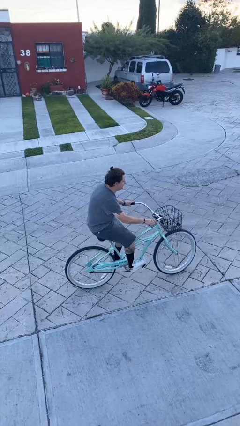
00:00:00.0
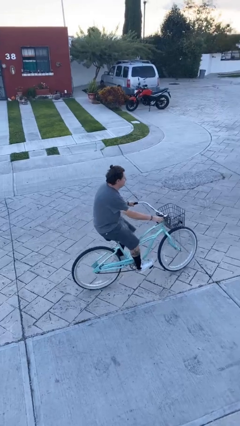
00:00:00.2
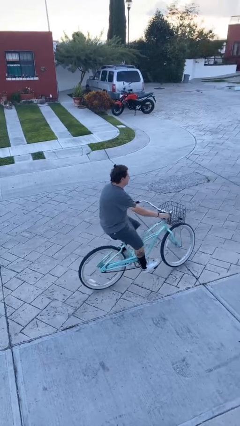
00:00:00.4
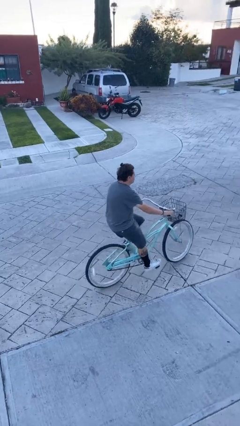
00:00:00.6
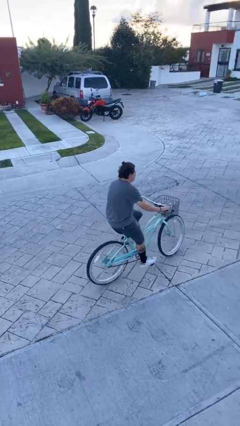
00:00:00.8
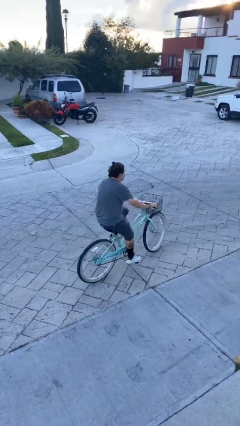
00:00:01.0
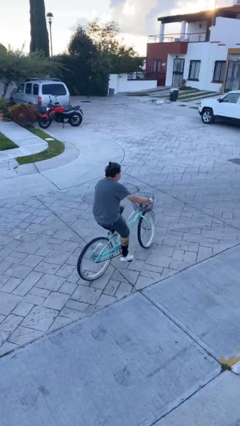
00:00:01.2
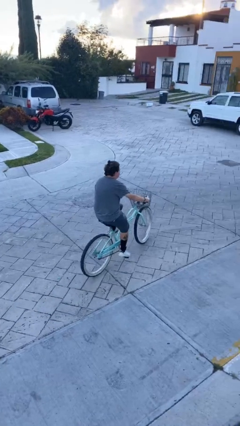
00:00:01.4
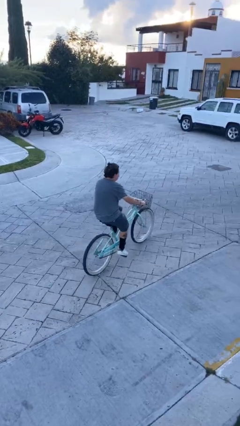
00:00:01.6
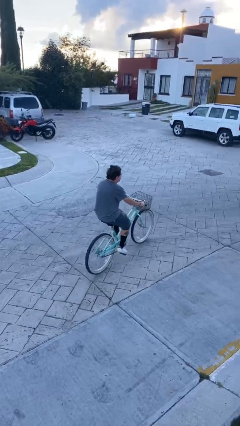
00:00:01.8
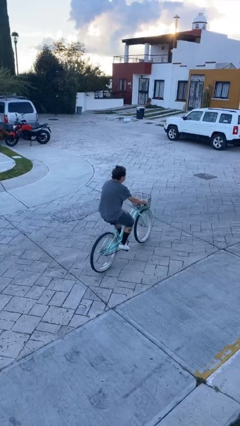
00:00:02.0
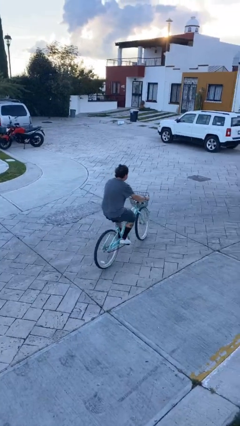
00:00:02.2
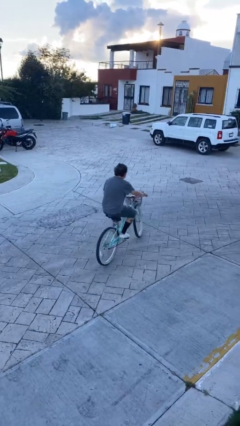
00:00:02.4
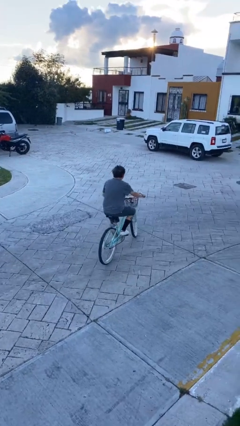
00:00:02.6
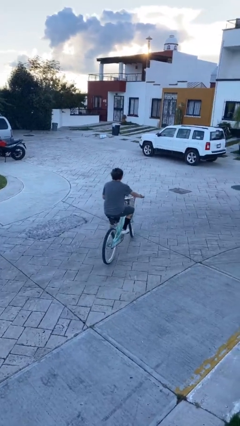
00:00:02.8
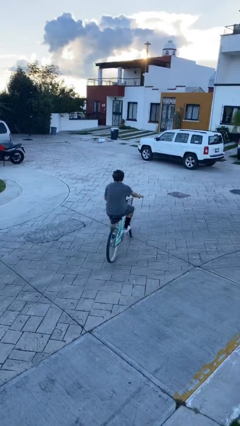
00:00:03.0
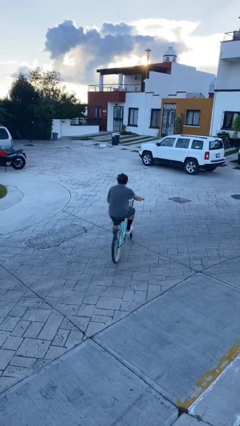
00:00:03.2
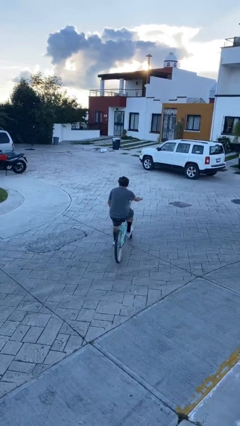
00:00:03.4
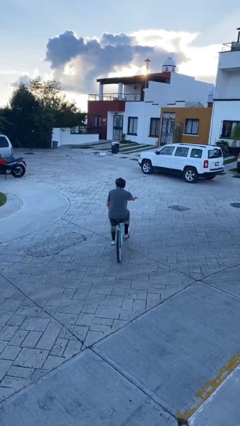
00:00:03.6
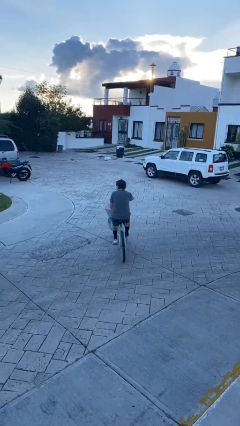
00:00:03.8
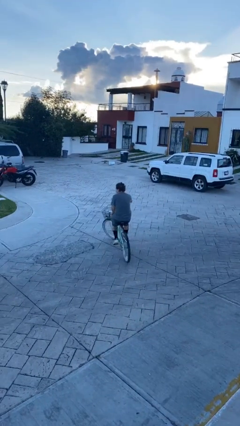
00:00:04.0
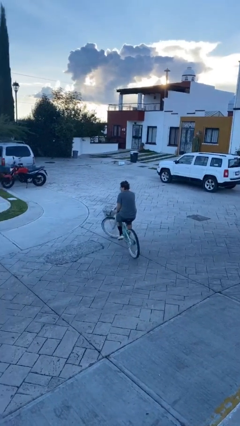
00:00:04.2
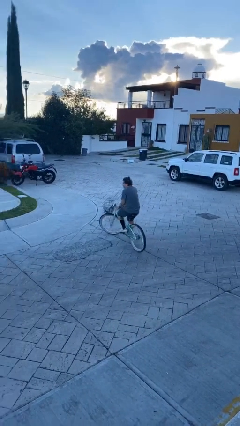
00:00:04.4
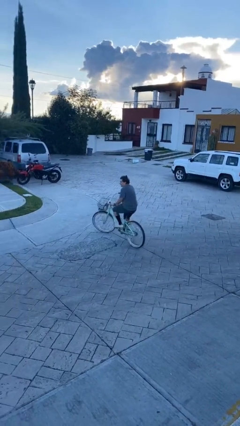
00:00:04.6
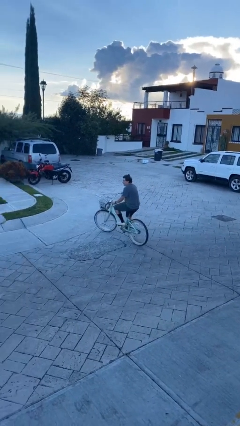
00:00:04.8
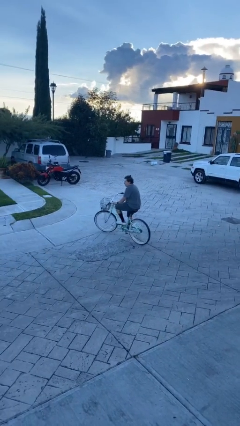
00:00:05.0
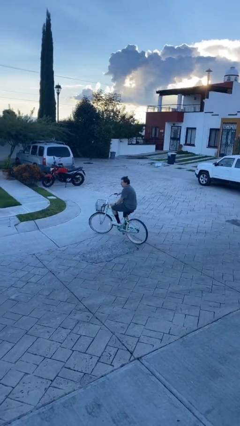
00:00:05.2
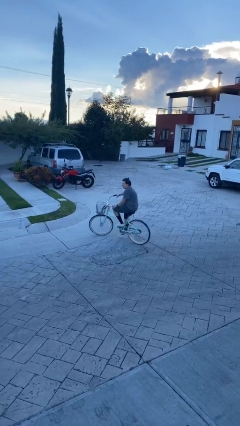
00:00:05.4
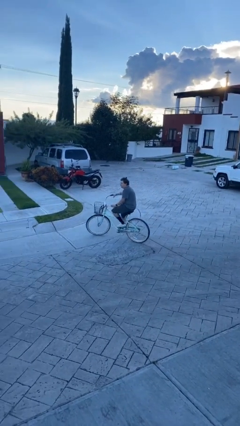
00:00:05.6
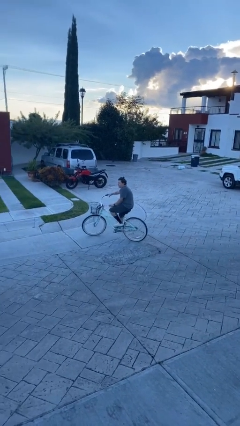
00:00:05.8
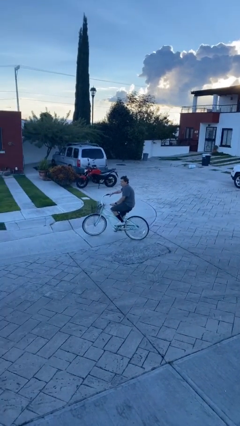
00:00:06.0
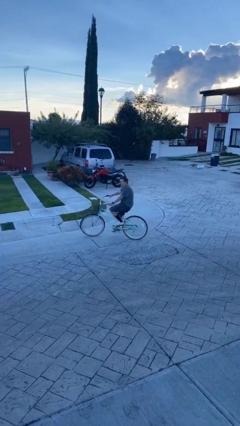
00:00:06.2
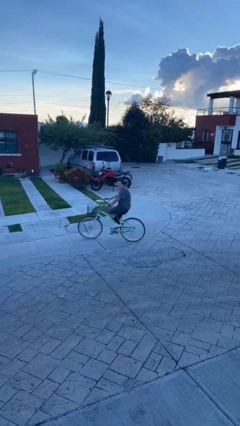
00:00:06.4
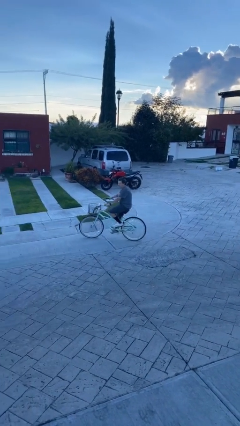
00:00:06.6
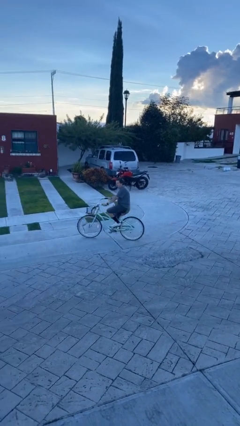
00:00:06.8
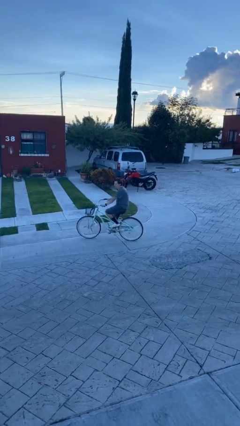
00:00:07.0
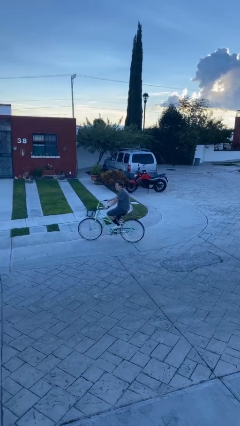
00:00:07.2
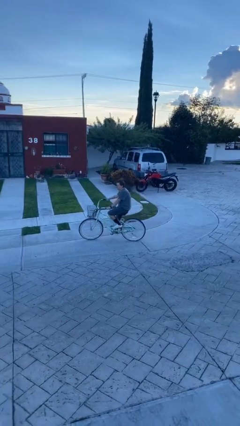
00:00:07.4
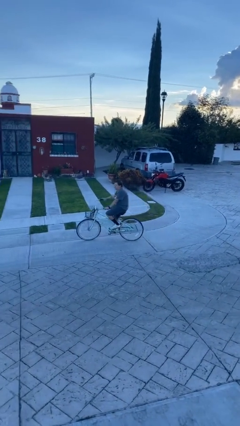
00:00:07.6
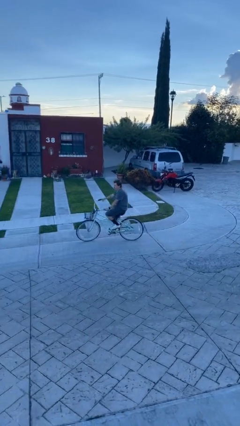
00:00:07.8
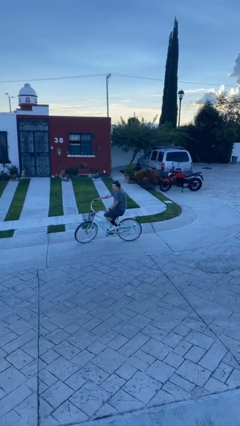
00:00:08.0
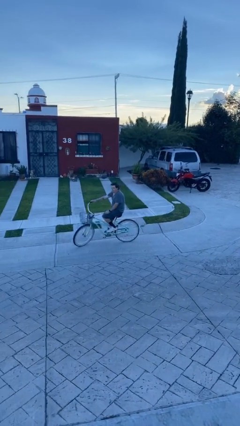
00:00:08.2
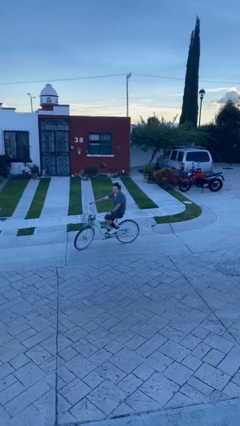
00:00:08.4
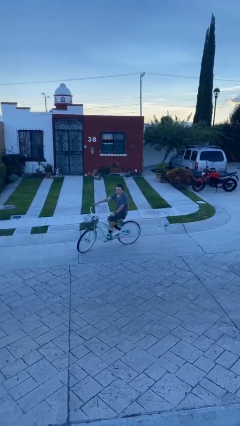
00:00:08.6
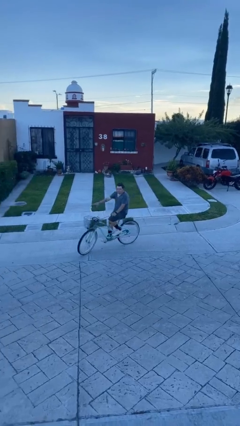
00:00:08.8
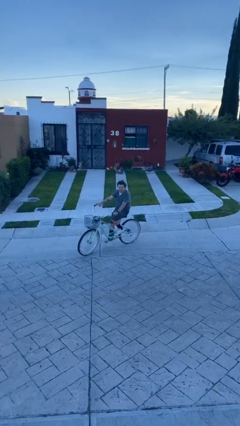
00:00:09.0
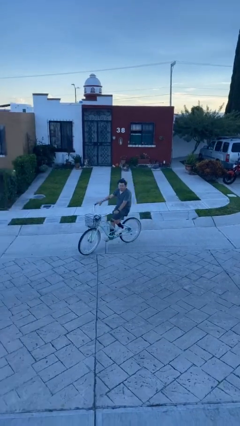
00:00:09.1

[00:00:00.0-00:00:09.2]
person rides bicycle

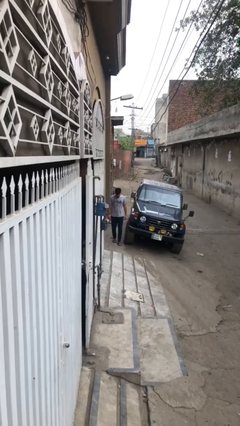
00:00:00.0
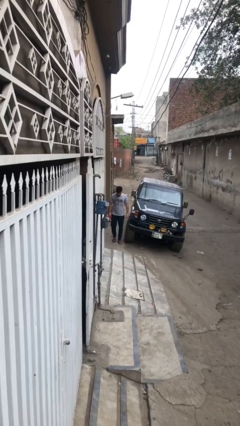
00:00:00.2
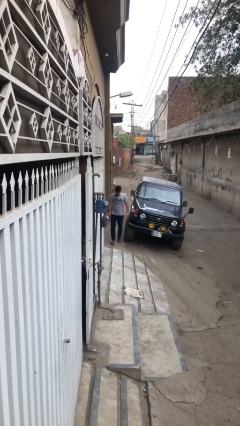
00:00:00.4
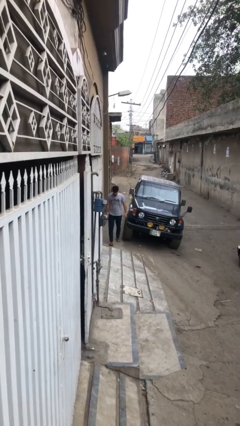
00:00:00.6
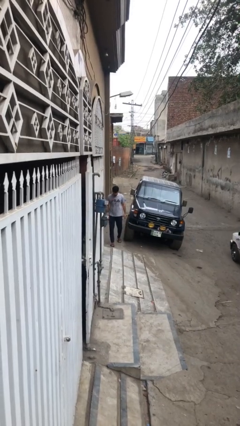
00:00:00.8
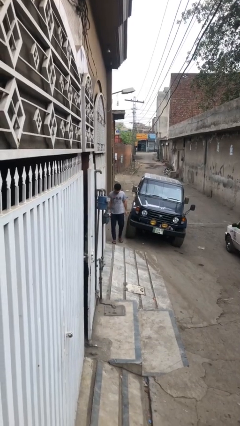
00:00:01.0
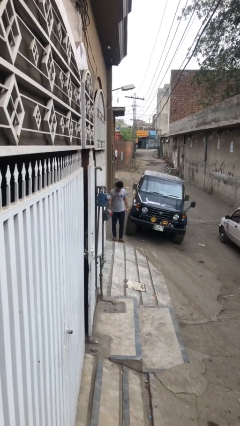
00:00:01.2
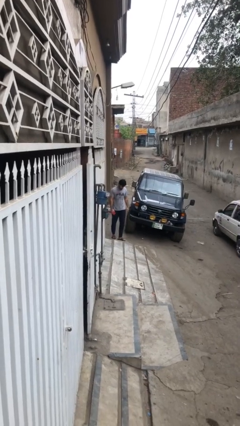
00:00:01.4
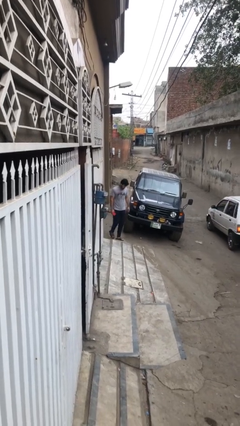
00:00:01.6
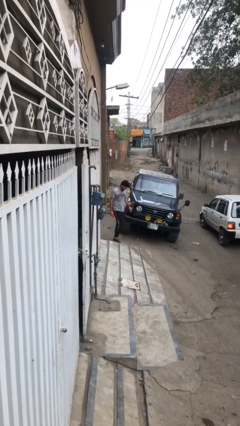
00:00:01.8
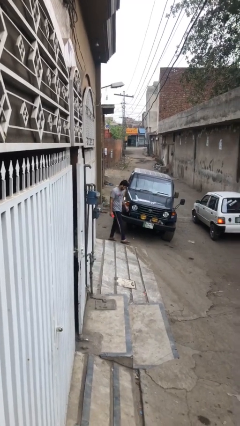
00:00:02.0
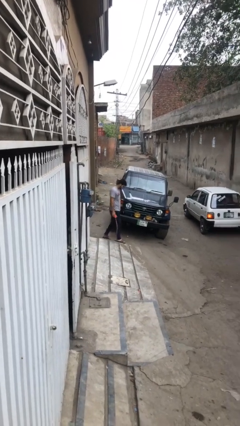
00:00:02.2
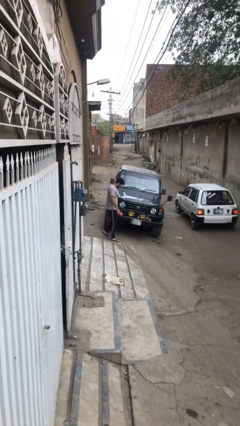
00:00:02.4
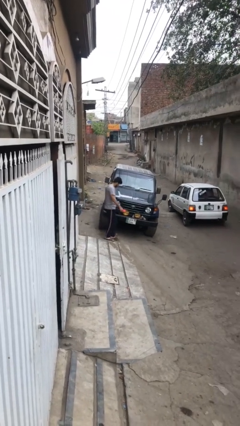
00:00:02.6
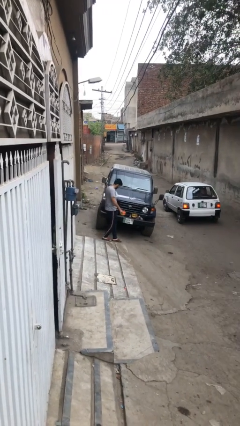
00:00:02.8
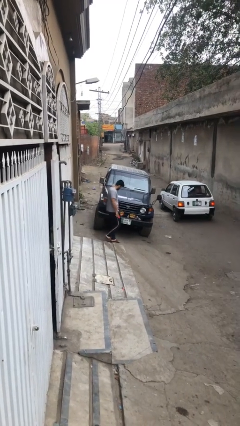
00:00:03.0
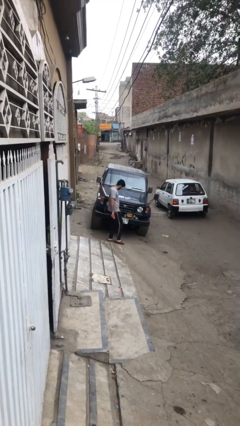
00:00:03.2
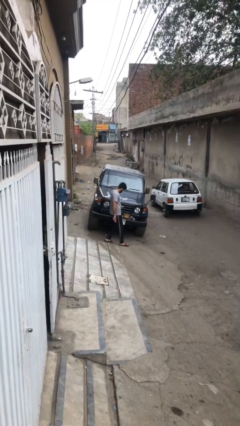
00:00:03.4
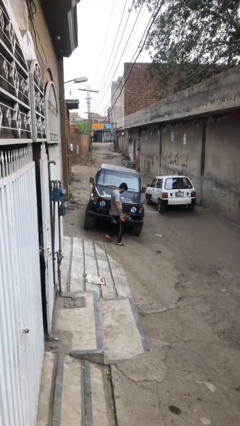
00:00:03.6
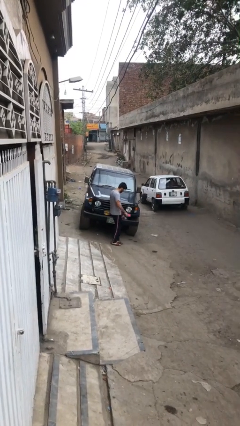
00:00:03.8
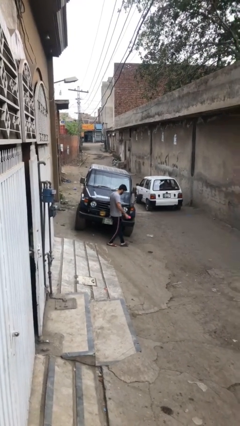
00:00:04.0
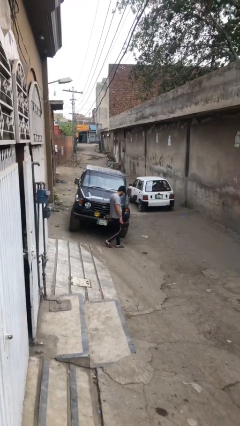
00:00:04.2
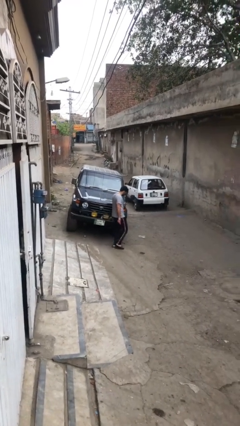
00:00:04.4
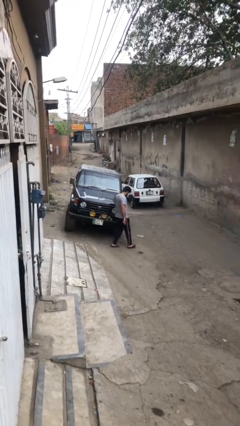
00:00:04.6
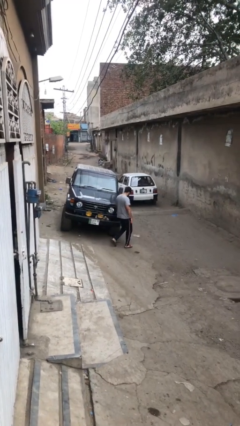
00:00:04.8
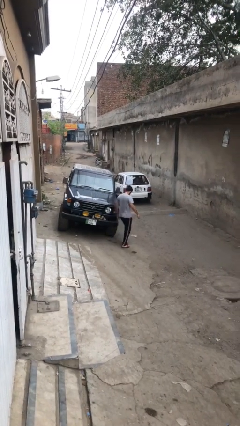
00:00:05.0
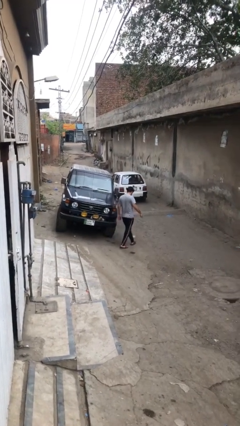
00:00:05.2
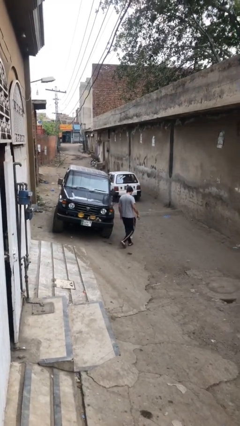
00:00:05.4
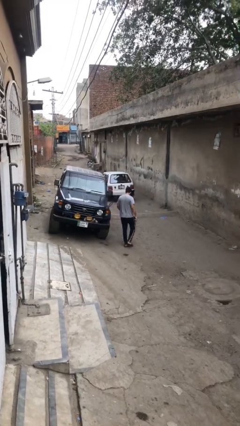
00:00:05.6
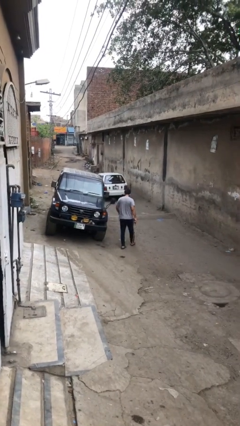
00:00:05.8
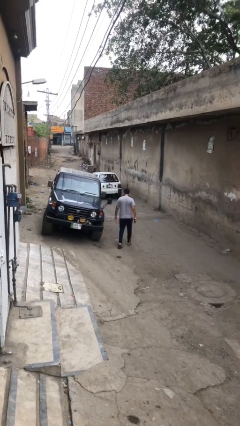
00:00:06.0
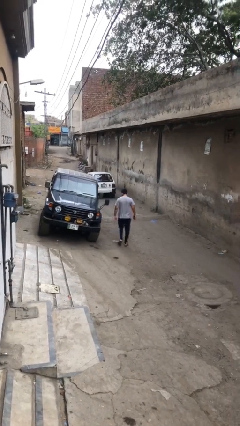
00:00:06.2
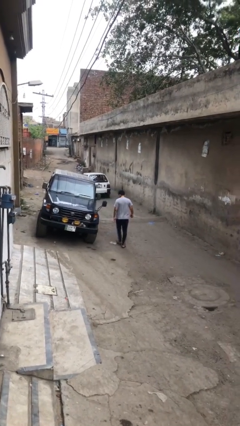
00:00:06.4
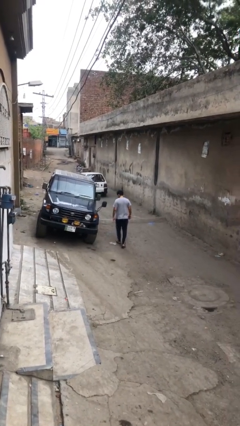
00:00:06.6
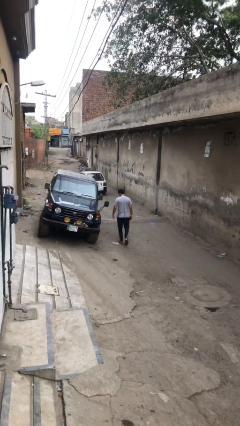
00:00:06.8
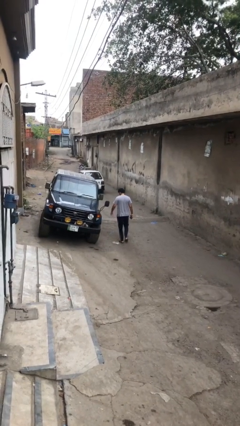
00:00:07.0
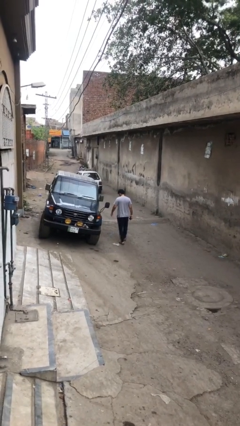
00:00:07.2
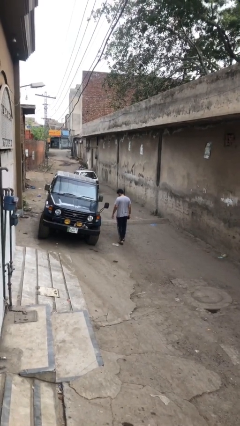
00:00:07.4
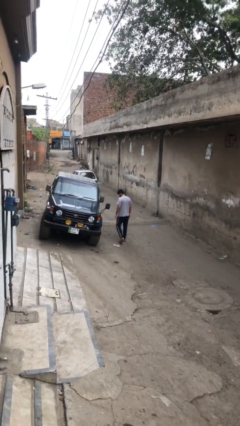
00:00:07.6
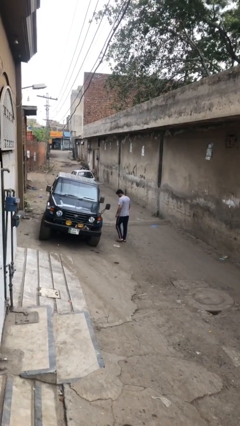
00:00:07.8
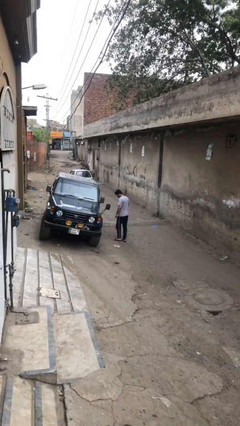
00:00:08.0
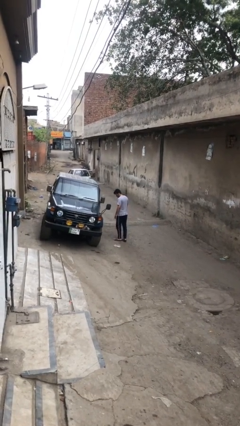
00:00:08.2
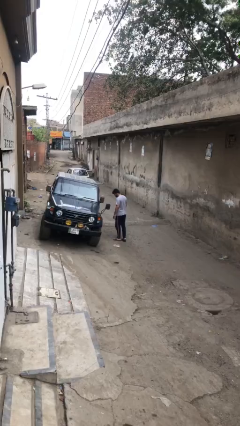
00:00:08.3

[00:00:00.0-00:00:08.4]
person walks around car

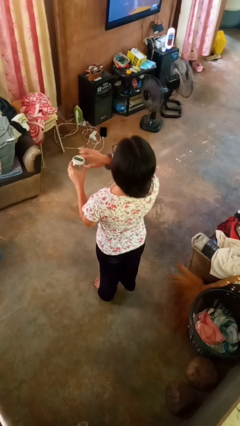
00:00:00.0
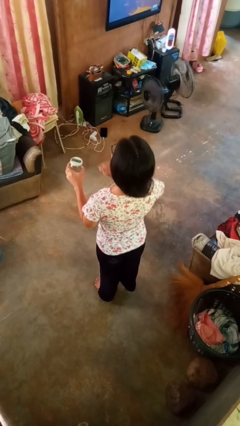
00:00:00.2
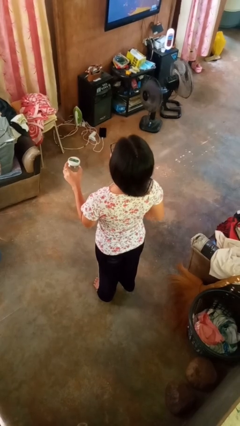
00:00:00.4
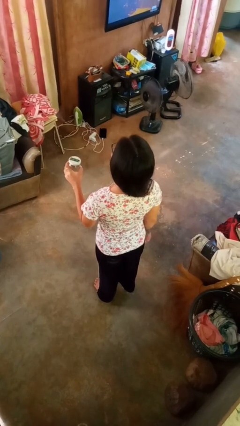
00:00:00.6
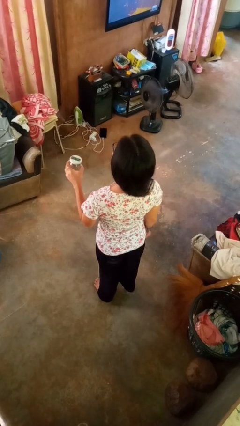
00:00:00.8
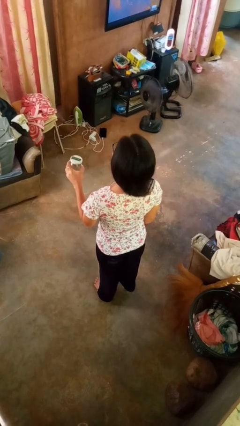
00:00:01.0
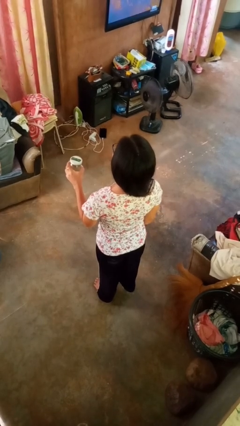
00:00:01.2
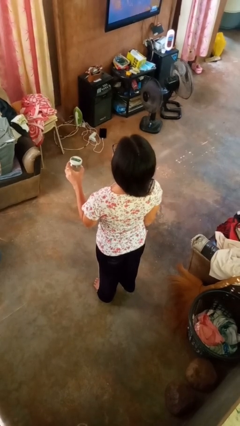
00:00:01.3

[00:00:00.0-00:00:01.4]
person closes jar
